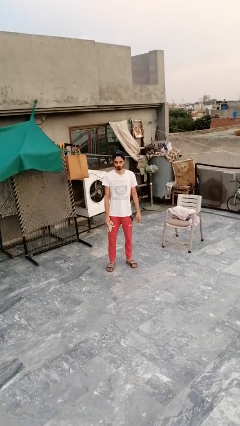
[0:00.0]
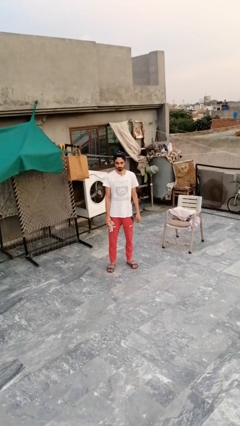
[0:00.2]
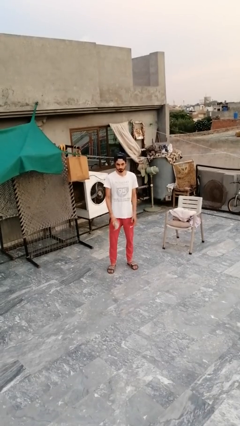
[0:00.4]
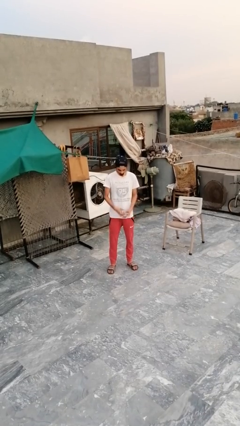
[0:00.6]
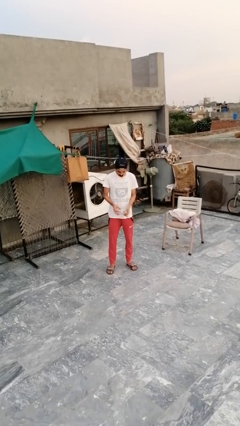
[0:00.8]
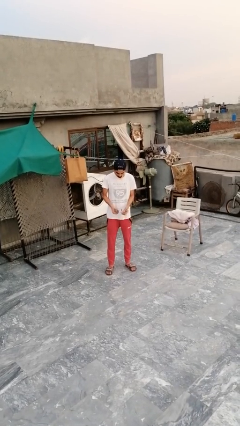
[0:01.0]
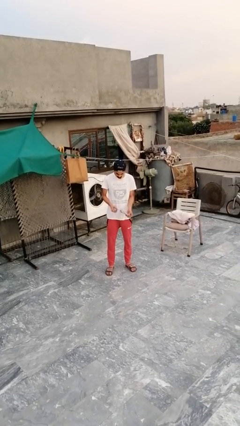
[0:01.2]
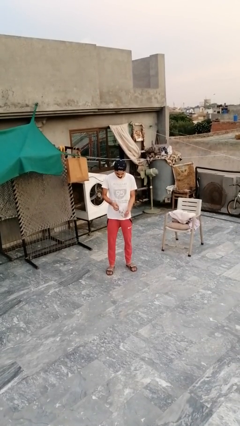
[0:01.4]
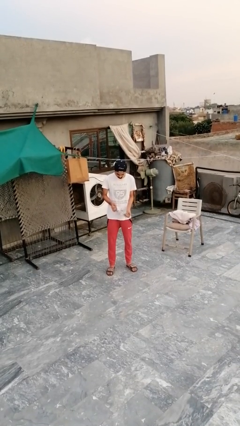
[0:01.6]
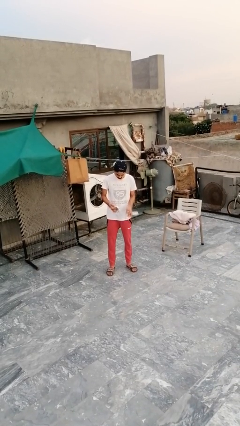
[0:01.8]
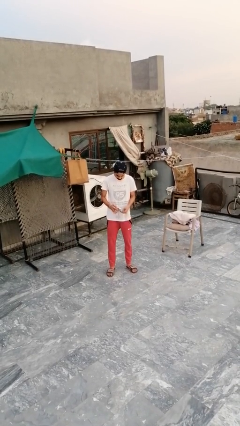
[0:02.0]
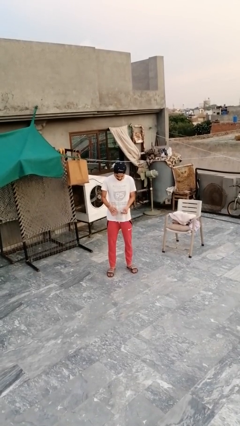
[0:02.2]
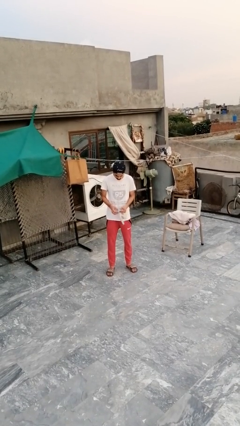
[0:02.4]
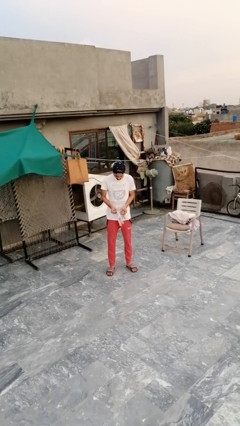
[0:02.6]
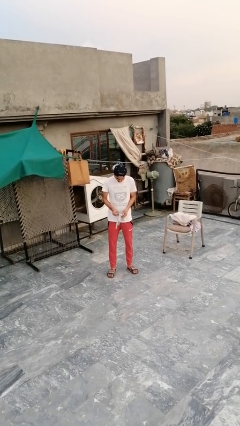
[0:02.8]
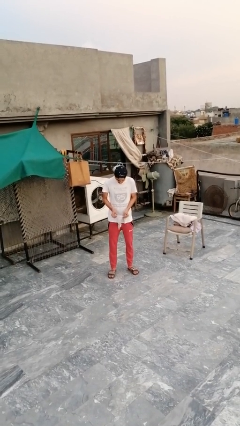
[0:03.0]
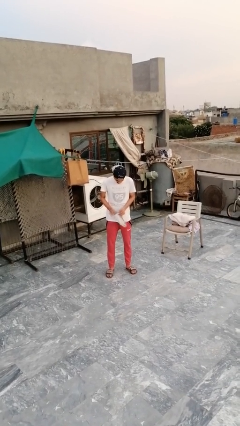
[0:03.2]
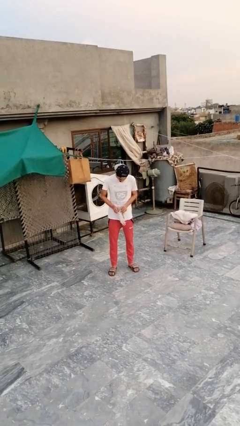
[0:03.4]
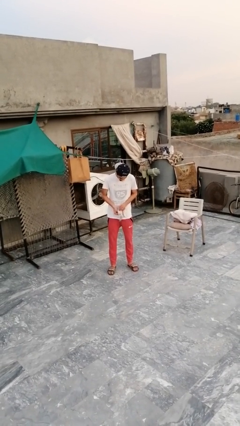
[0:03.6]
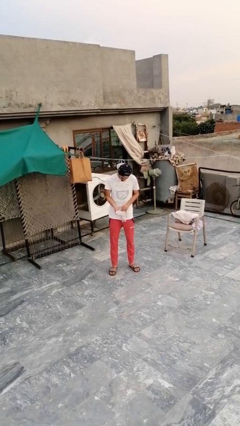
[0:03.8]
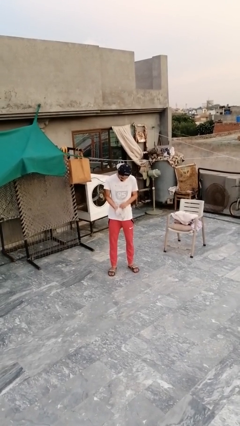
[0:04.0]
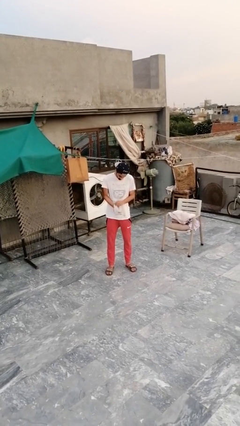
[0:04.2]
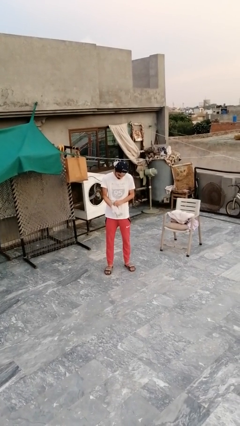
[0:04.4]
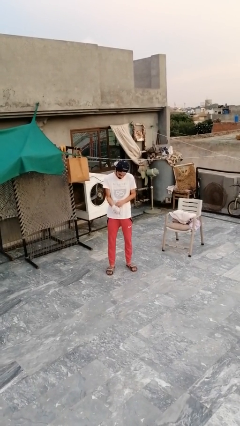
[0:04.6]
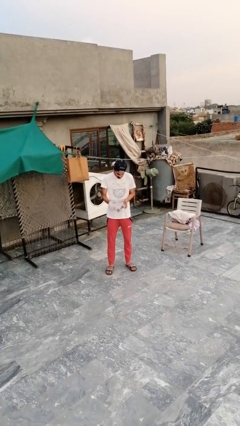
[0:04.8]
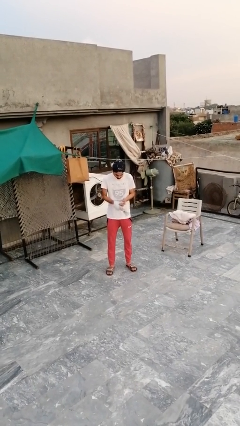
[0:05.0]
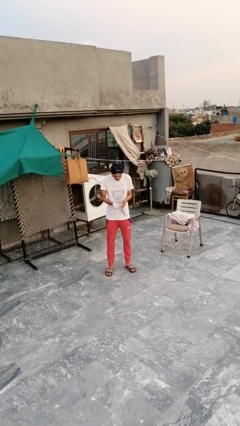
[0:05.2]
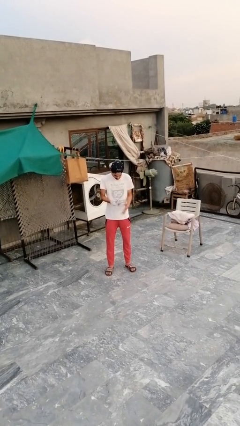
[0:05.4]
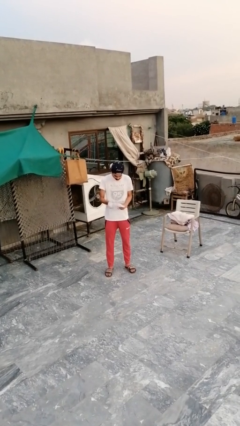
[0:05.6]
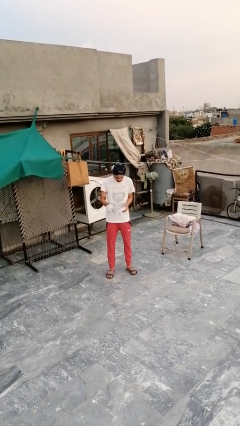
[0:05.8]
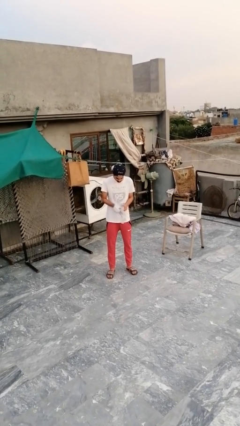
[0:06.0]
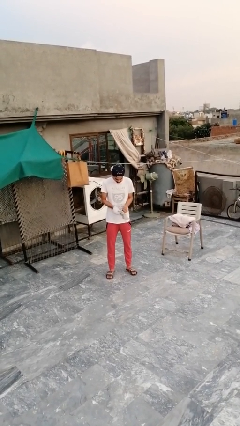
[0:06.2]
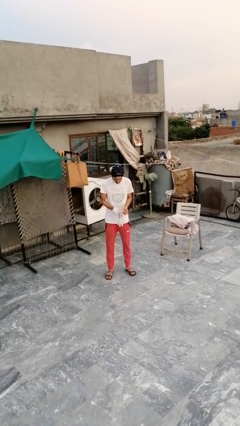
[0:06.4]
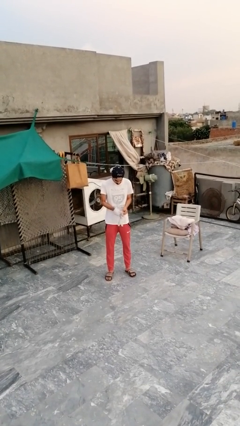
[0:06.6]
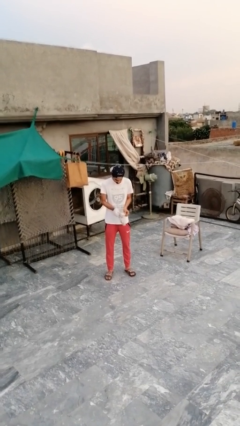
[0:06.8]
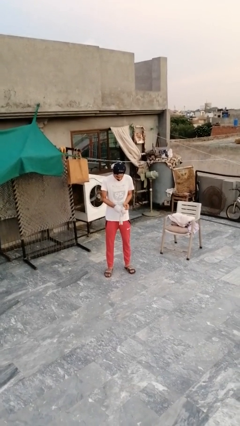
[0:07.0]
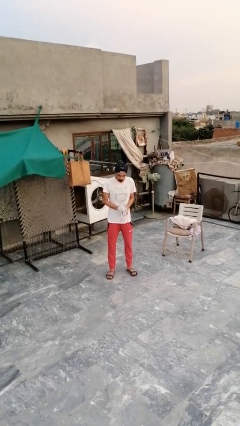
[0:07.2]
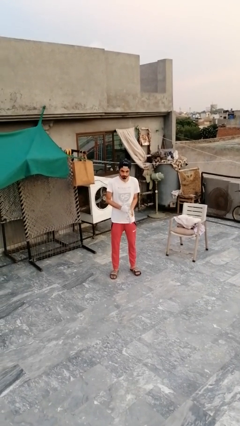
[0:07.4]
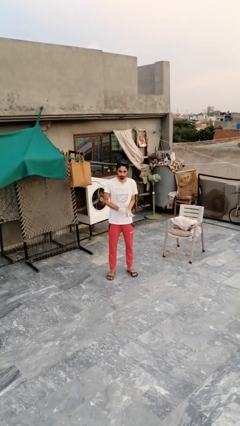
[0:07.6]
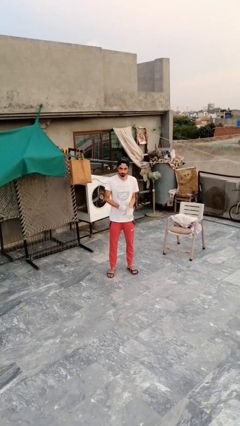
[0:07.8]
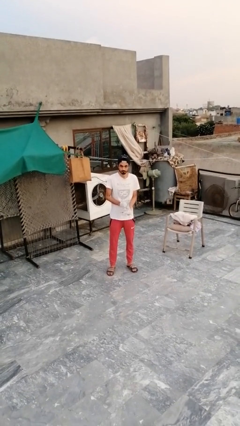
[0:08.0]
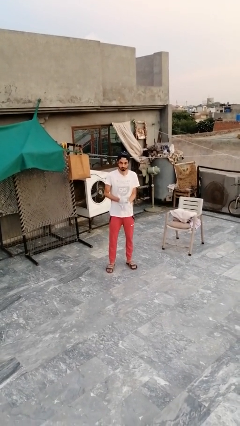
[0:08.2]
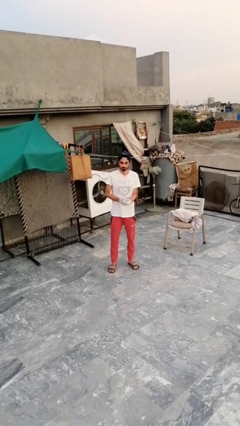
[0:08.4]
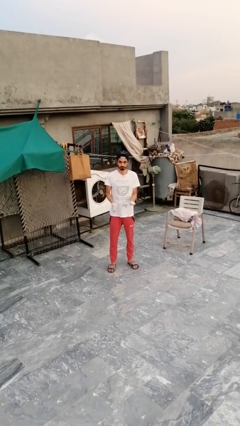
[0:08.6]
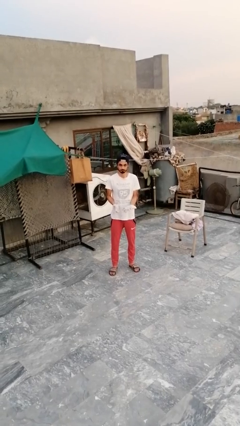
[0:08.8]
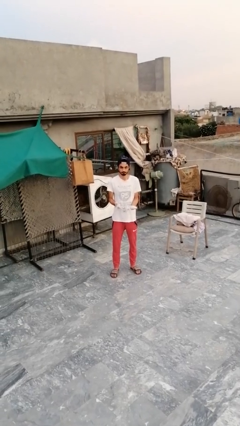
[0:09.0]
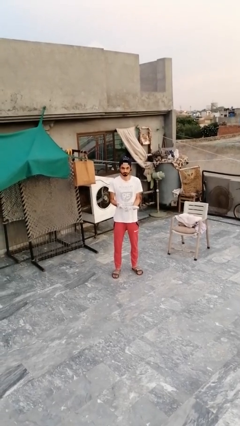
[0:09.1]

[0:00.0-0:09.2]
person puts on gloves

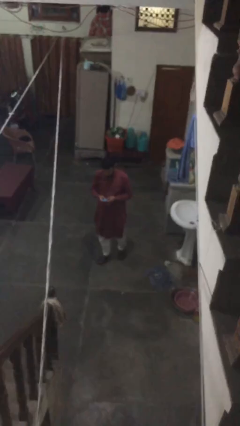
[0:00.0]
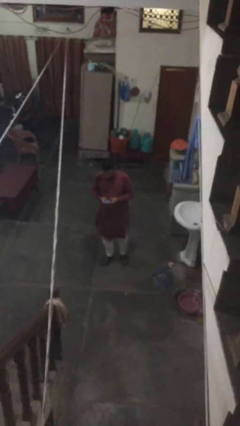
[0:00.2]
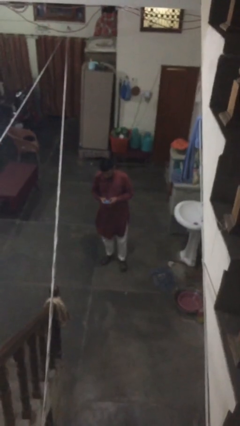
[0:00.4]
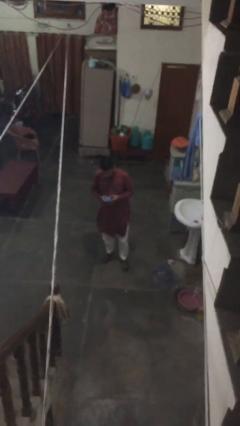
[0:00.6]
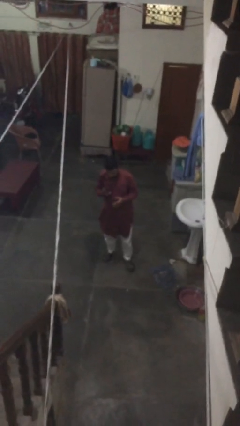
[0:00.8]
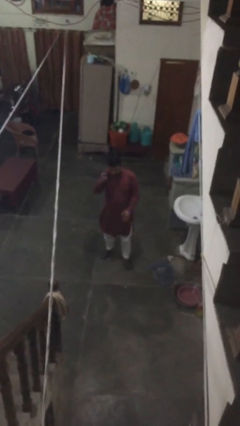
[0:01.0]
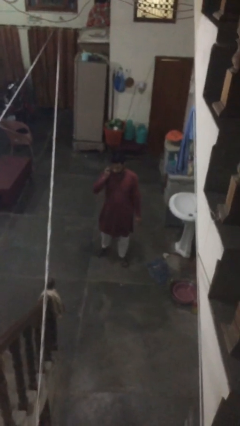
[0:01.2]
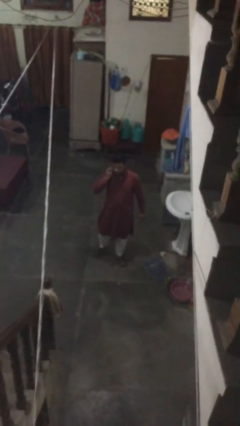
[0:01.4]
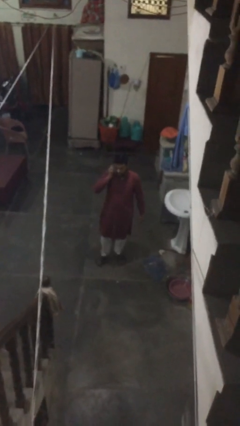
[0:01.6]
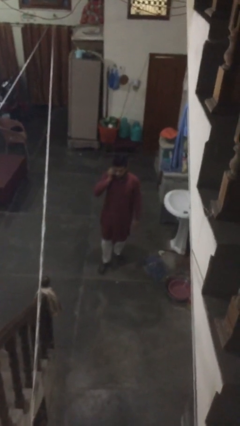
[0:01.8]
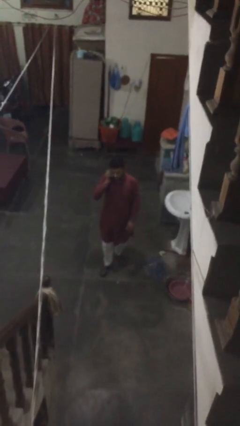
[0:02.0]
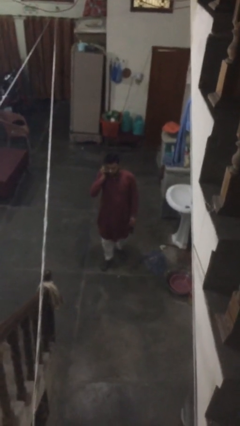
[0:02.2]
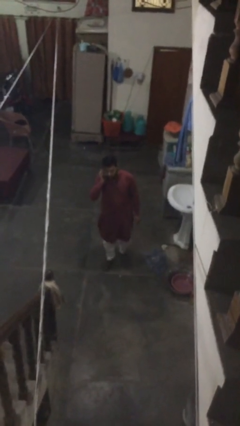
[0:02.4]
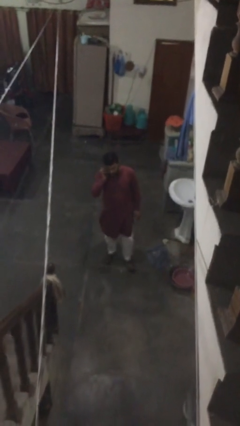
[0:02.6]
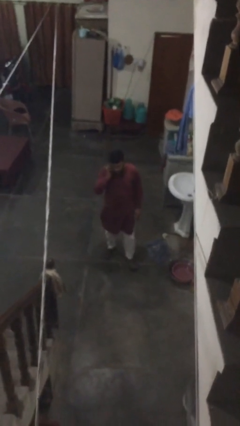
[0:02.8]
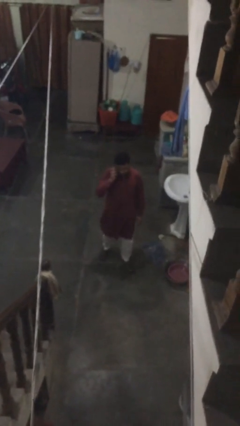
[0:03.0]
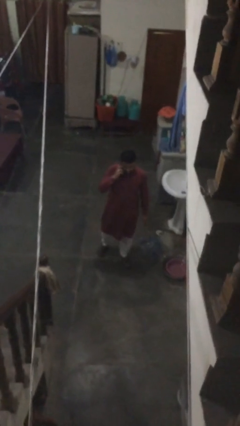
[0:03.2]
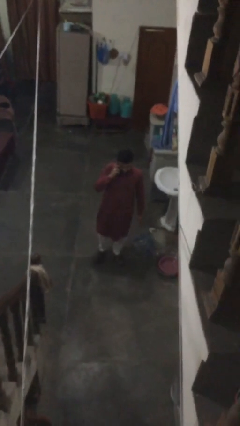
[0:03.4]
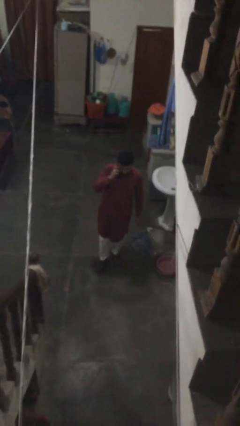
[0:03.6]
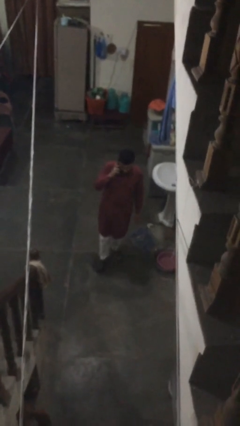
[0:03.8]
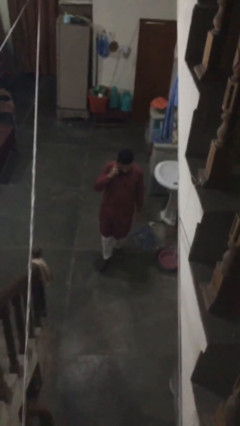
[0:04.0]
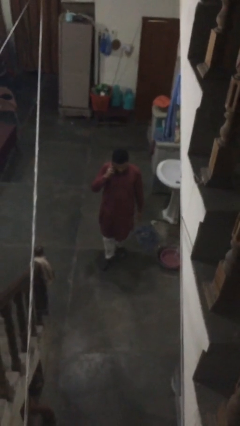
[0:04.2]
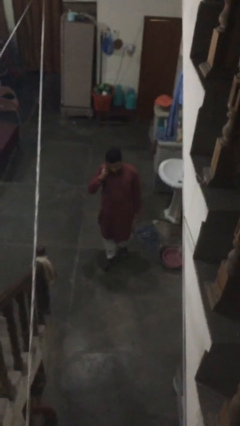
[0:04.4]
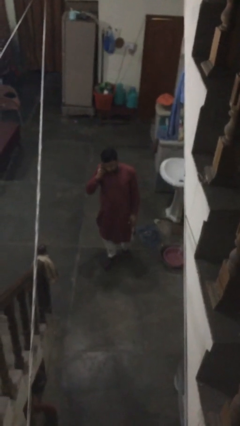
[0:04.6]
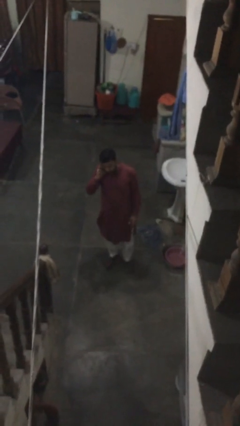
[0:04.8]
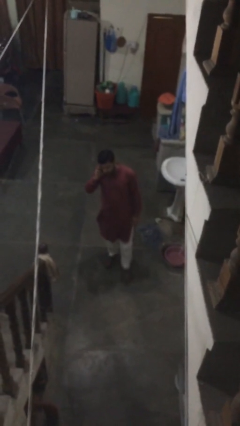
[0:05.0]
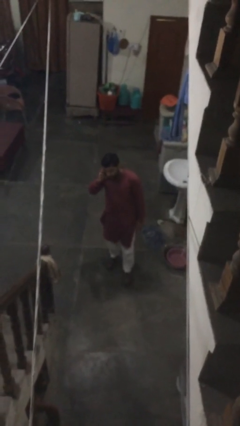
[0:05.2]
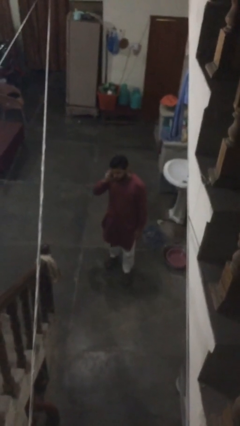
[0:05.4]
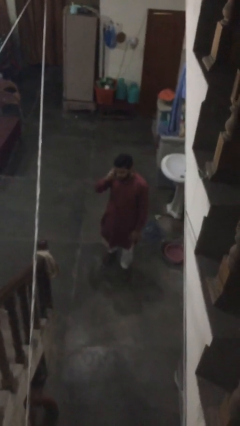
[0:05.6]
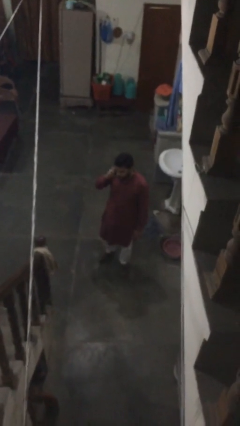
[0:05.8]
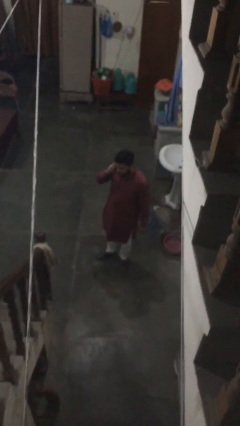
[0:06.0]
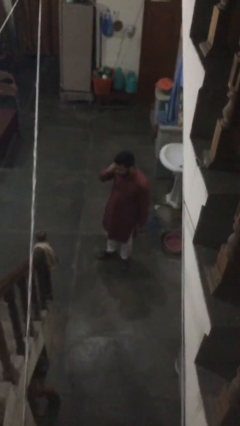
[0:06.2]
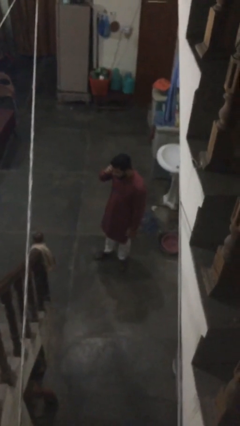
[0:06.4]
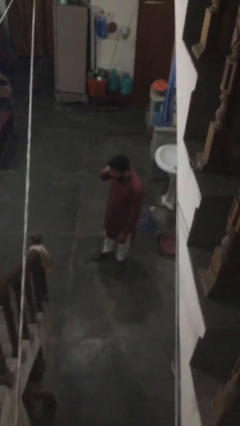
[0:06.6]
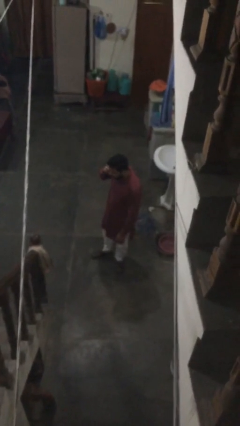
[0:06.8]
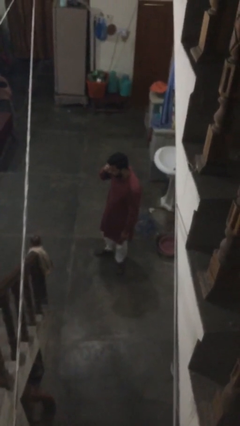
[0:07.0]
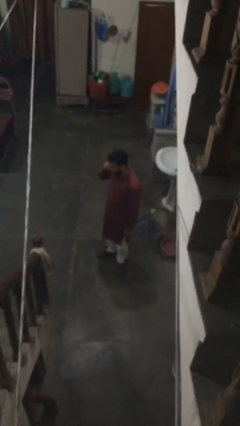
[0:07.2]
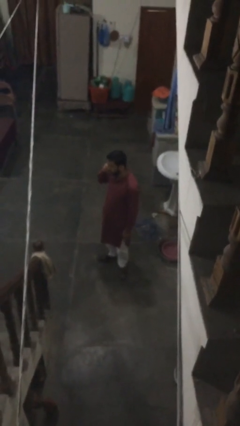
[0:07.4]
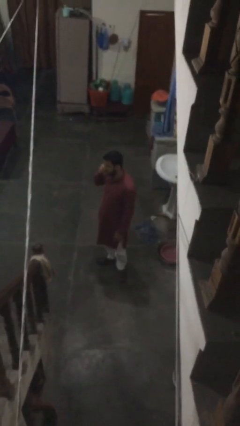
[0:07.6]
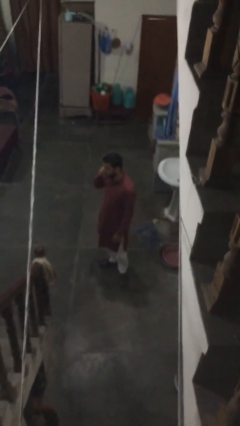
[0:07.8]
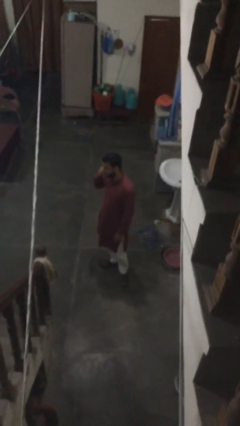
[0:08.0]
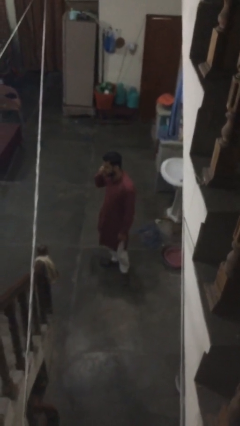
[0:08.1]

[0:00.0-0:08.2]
person talks on phone

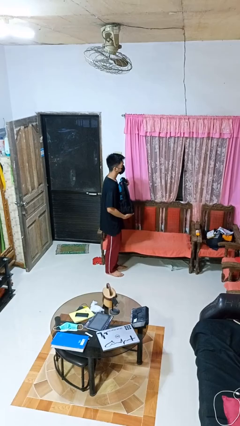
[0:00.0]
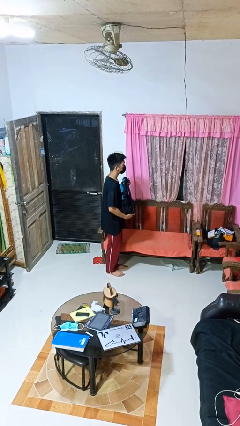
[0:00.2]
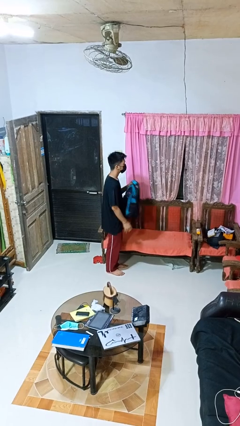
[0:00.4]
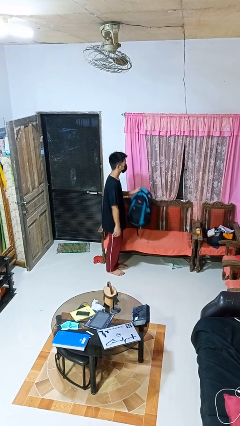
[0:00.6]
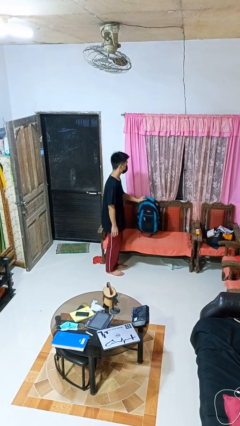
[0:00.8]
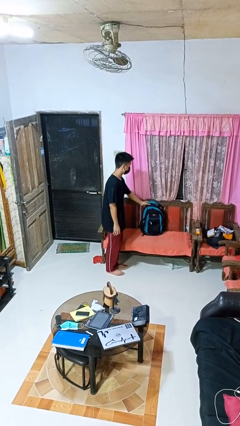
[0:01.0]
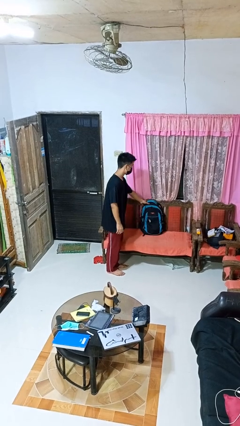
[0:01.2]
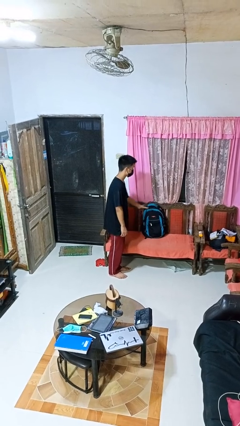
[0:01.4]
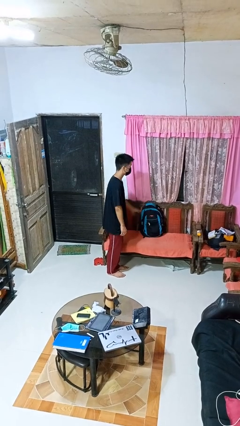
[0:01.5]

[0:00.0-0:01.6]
person puts down object on couch
